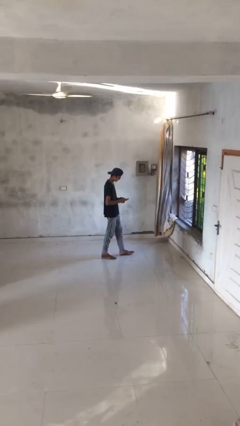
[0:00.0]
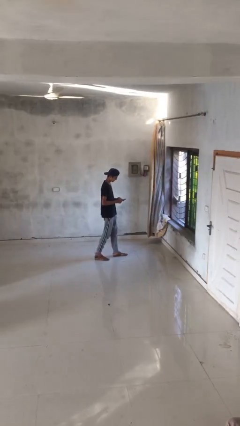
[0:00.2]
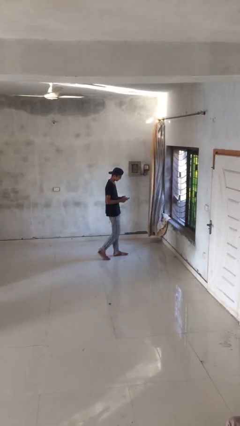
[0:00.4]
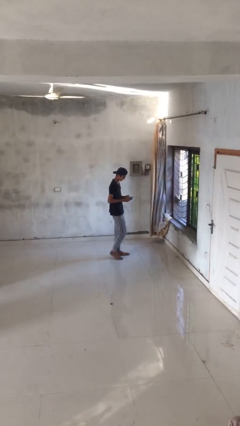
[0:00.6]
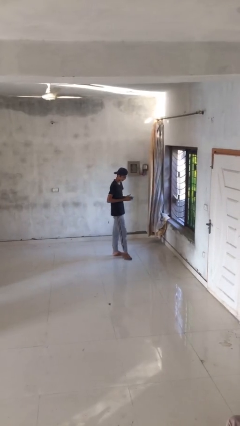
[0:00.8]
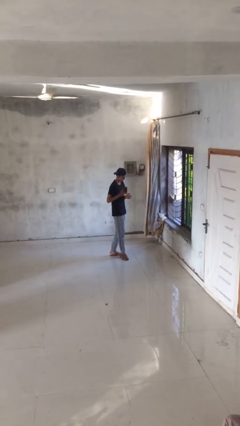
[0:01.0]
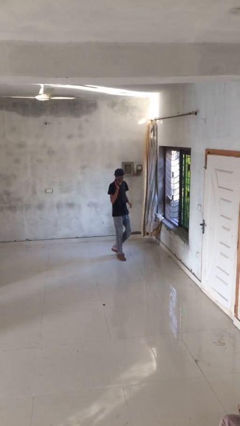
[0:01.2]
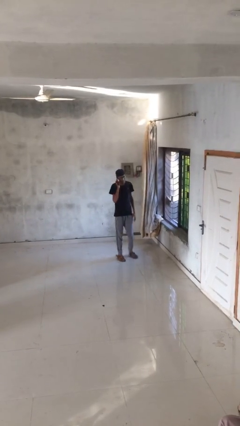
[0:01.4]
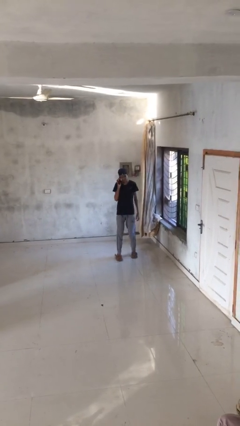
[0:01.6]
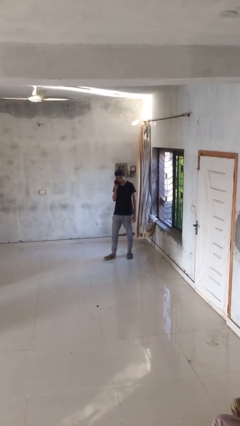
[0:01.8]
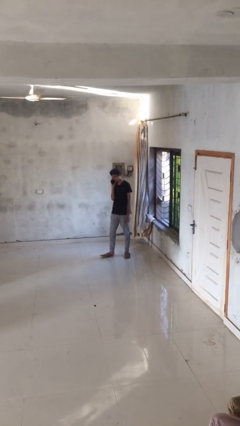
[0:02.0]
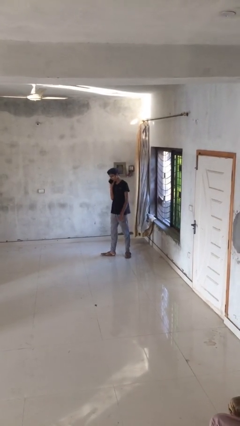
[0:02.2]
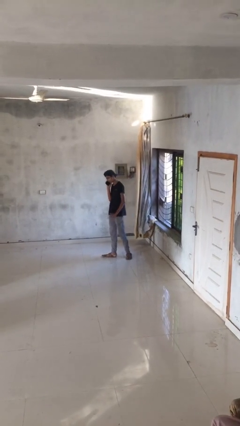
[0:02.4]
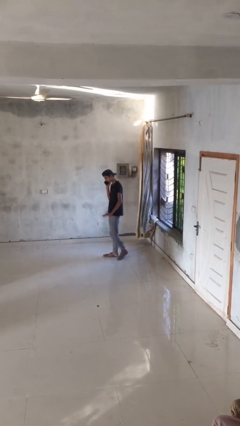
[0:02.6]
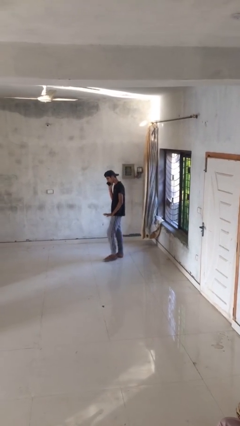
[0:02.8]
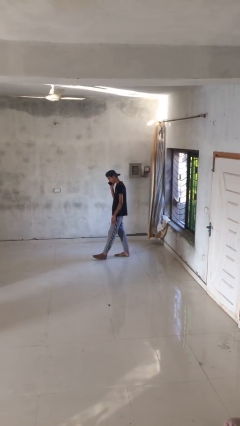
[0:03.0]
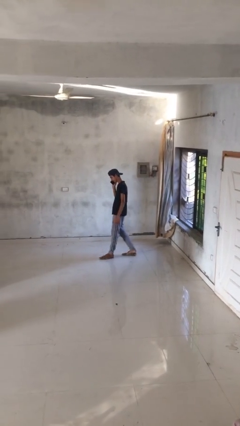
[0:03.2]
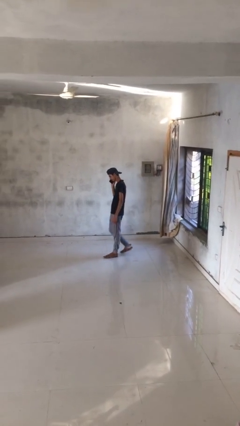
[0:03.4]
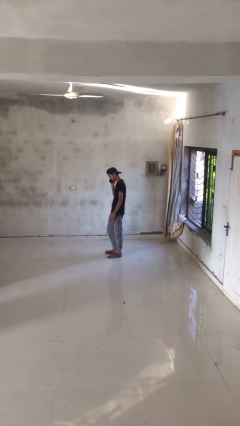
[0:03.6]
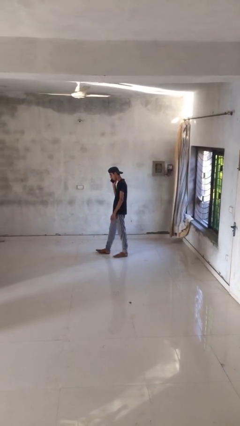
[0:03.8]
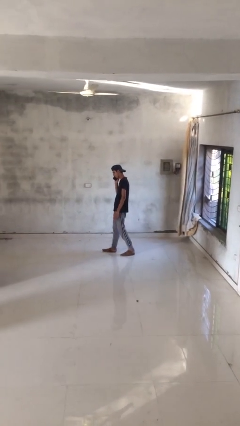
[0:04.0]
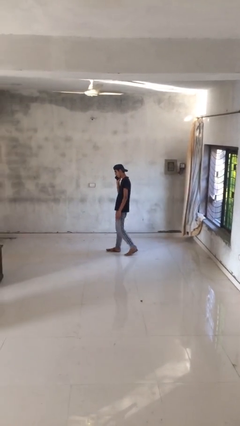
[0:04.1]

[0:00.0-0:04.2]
person talks on phone

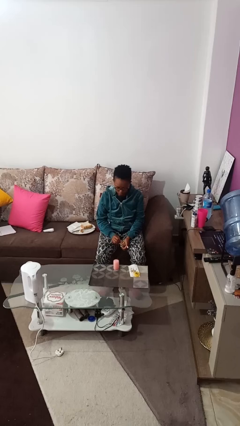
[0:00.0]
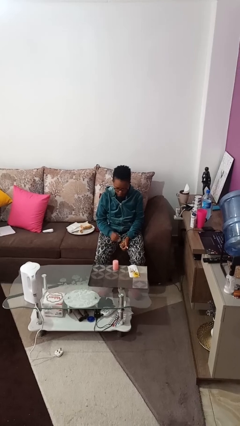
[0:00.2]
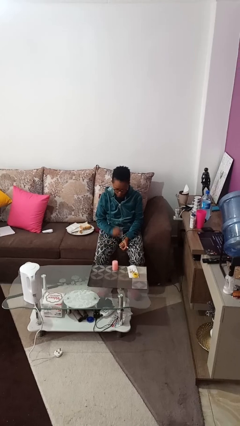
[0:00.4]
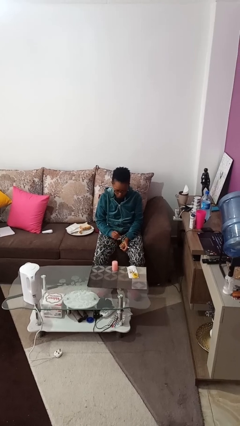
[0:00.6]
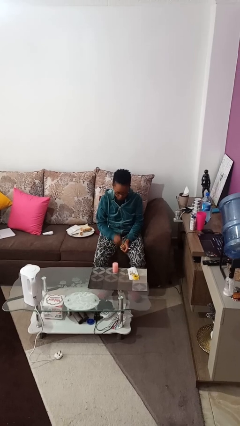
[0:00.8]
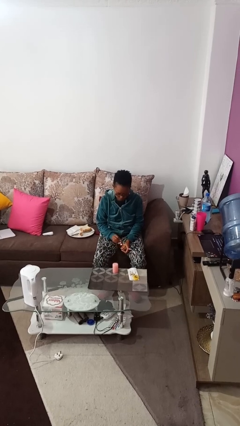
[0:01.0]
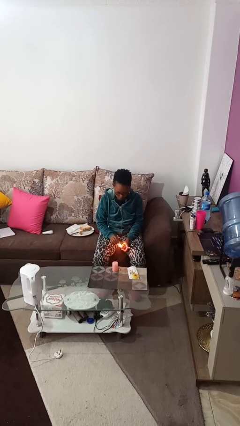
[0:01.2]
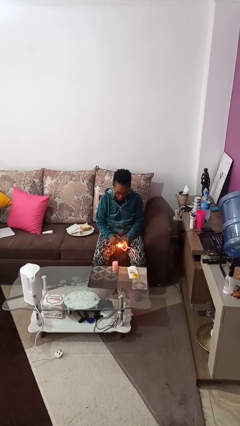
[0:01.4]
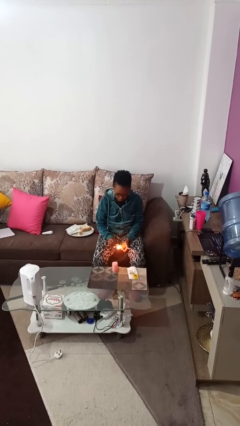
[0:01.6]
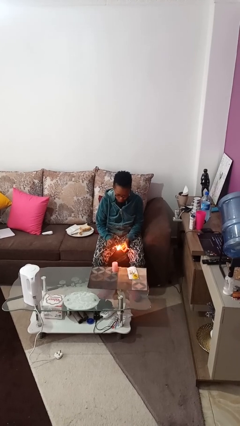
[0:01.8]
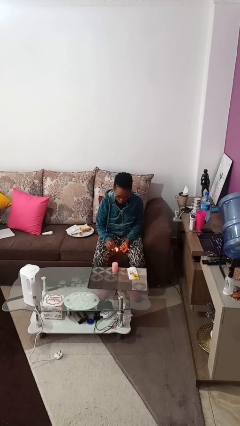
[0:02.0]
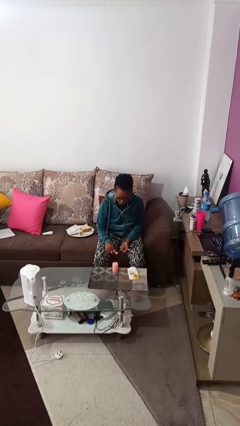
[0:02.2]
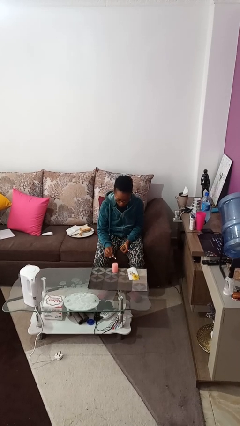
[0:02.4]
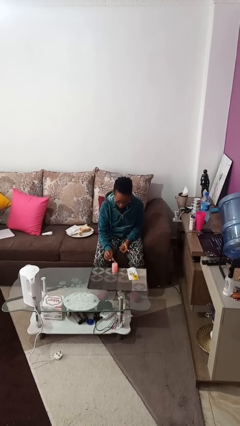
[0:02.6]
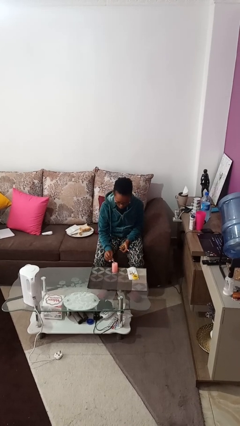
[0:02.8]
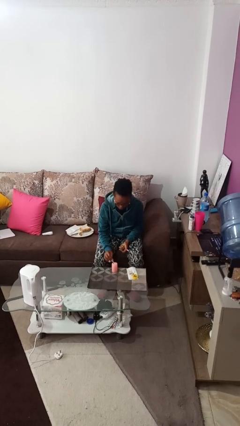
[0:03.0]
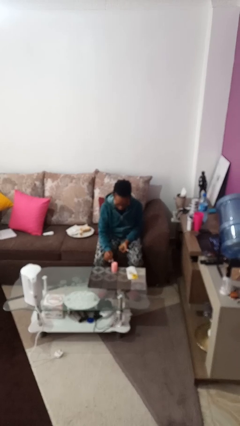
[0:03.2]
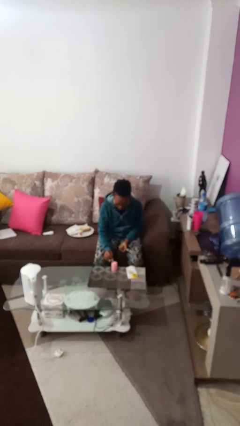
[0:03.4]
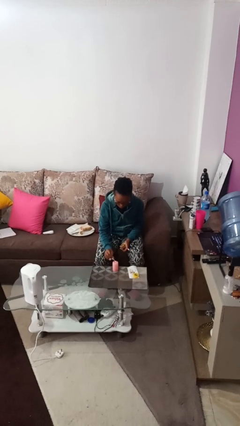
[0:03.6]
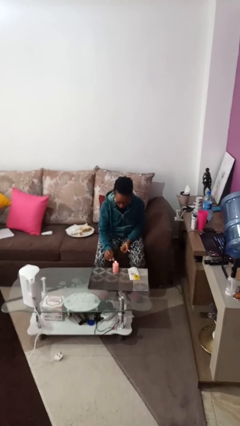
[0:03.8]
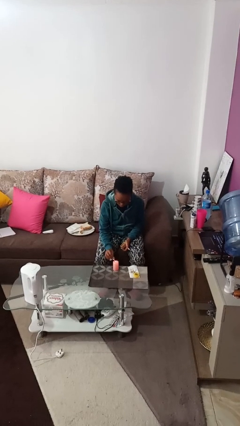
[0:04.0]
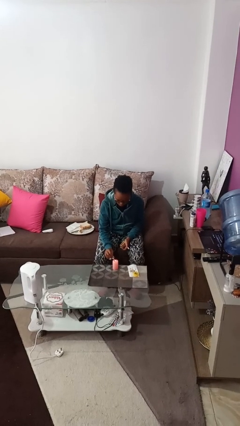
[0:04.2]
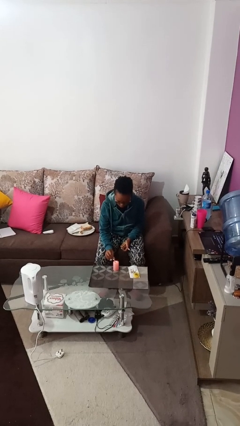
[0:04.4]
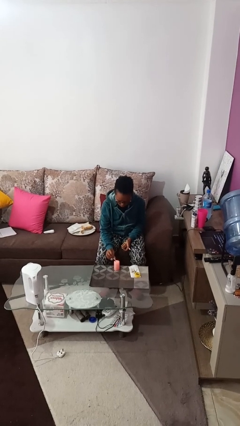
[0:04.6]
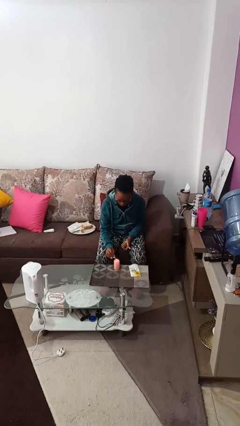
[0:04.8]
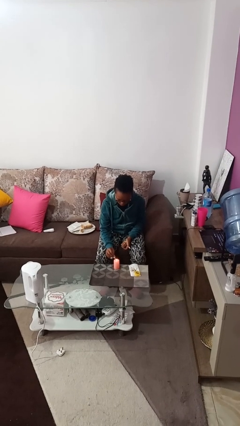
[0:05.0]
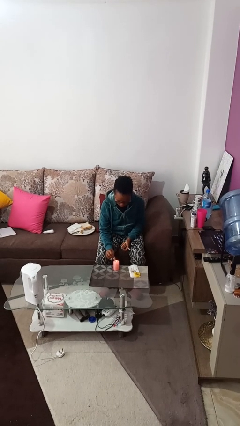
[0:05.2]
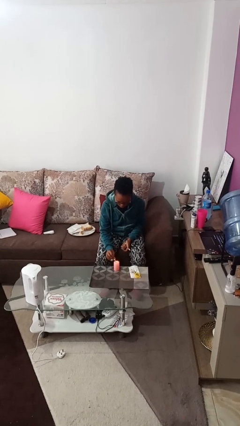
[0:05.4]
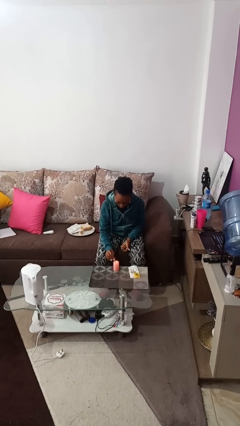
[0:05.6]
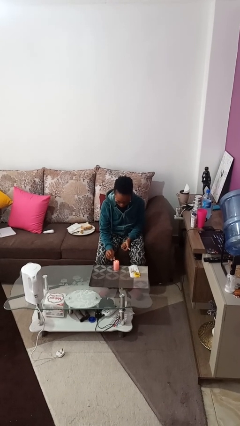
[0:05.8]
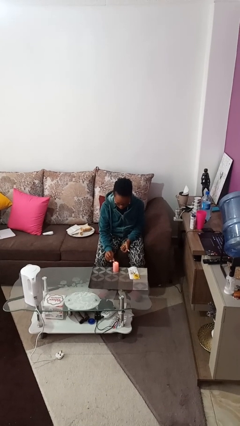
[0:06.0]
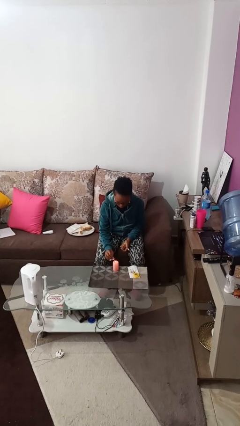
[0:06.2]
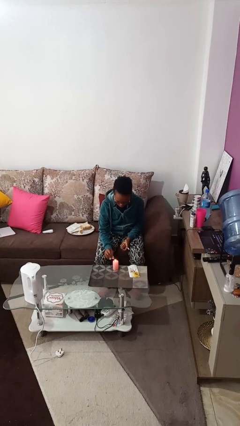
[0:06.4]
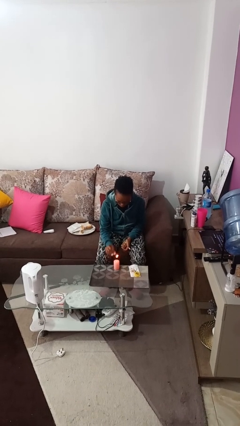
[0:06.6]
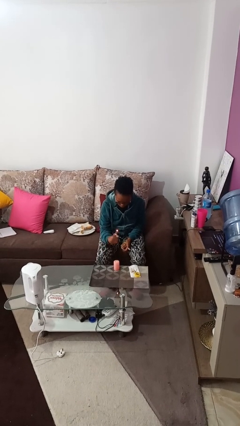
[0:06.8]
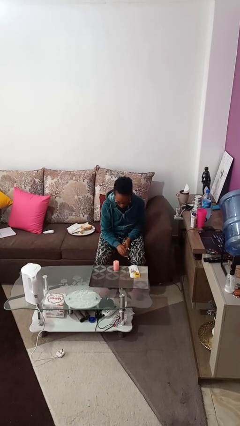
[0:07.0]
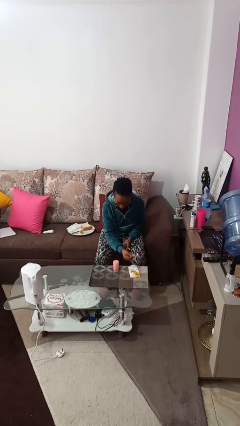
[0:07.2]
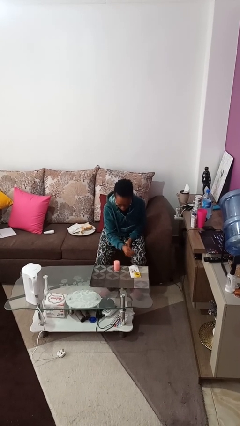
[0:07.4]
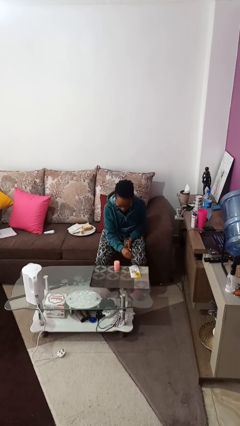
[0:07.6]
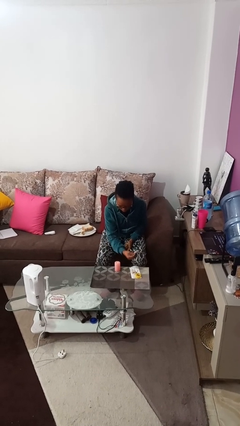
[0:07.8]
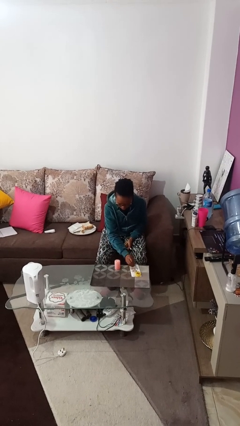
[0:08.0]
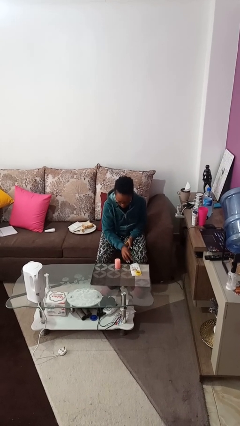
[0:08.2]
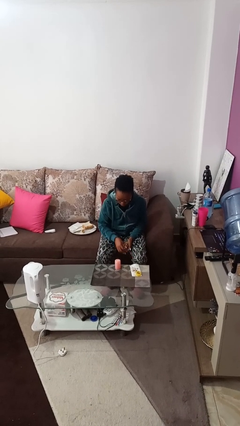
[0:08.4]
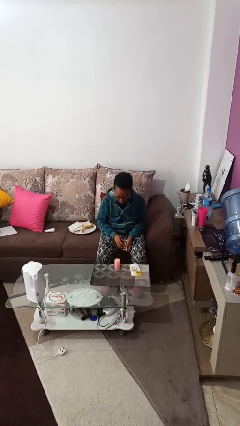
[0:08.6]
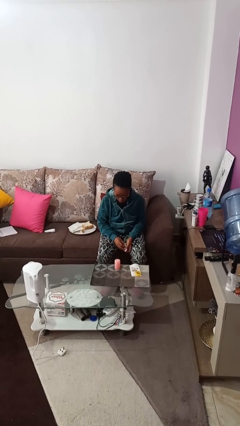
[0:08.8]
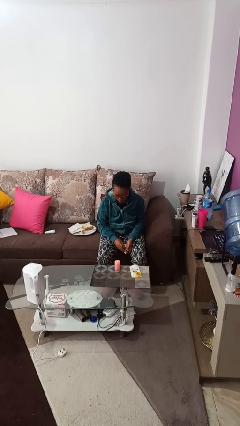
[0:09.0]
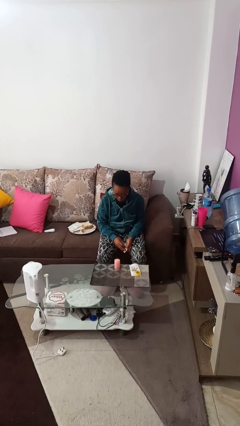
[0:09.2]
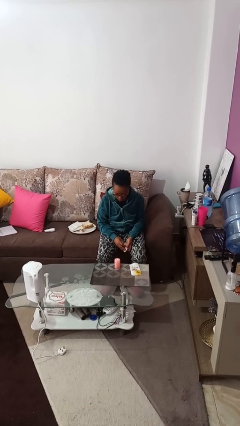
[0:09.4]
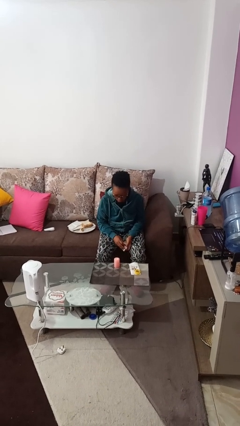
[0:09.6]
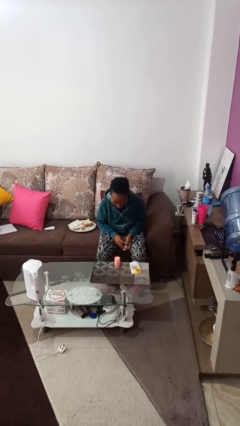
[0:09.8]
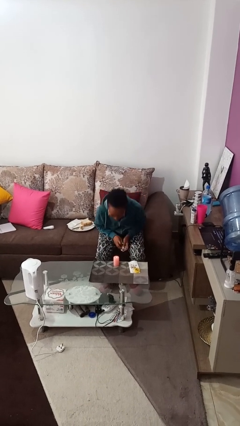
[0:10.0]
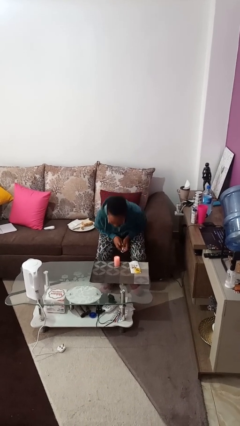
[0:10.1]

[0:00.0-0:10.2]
person lights candle

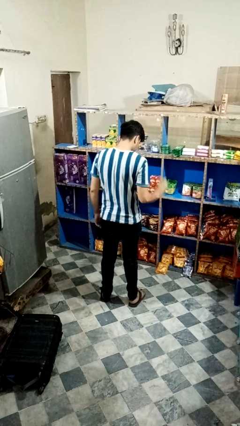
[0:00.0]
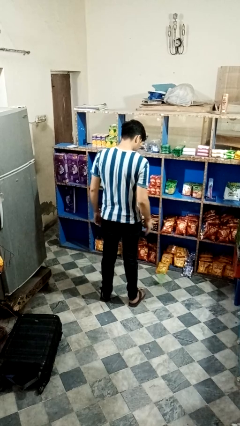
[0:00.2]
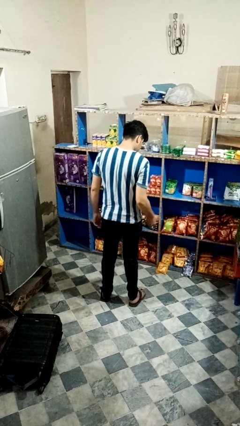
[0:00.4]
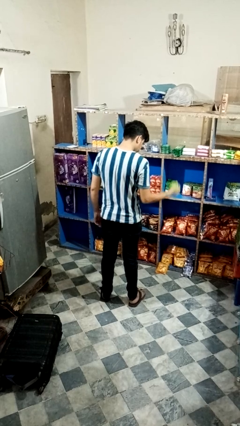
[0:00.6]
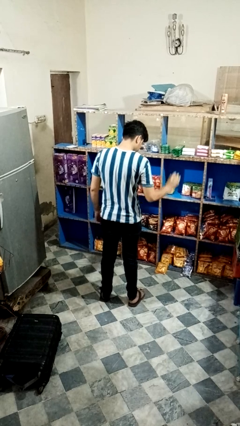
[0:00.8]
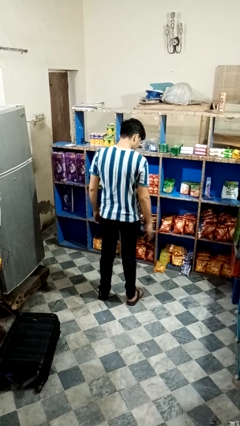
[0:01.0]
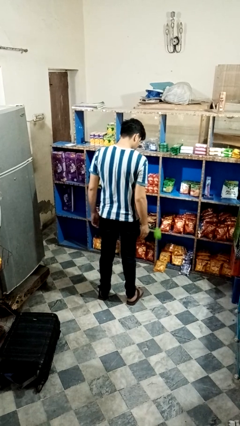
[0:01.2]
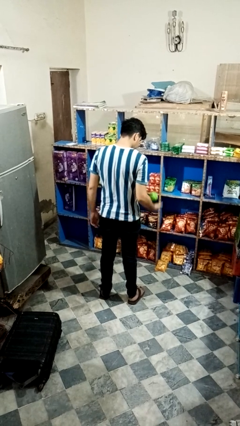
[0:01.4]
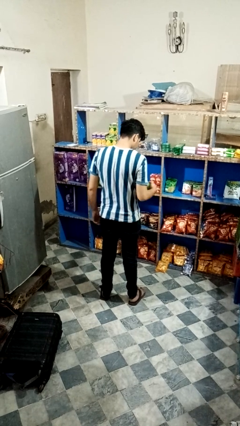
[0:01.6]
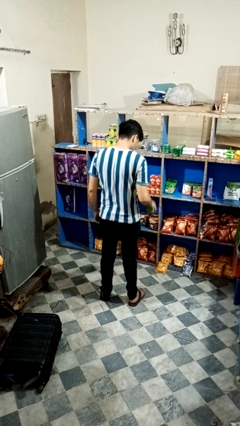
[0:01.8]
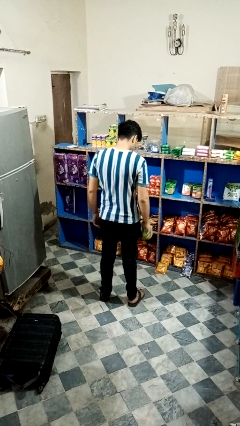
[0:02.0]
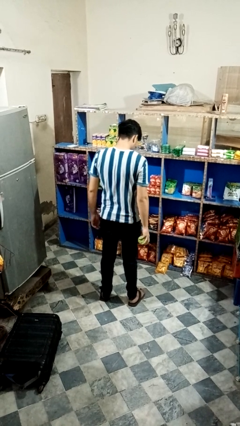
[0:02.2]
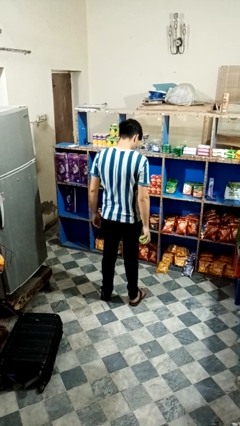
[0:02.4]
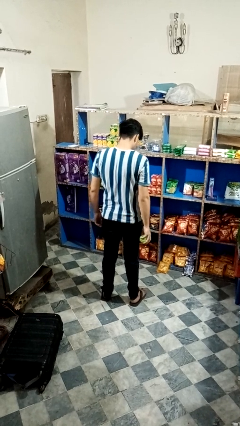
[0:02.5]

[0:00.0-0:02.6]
person bounces ball on floor

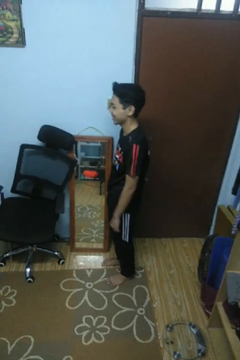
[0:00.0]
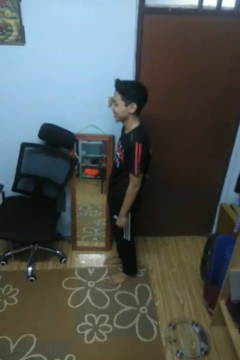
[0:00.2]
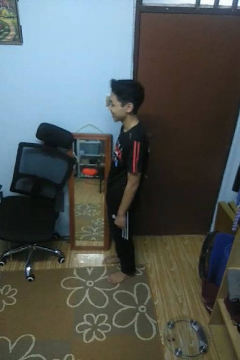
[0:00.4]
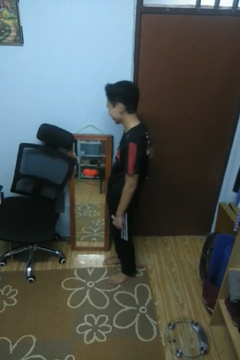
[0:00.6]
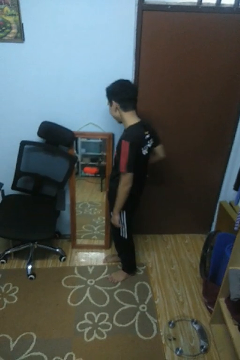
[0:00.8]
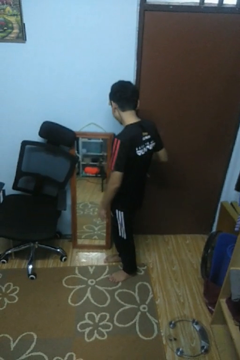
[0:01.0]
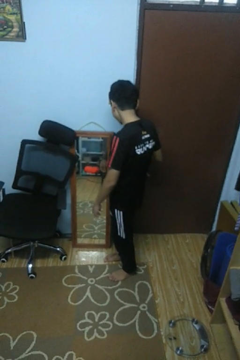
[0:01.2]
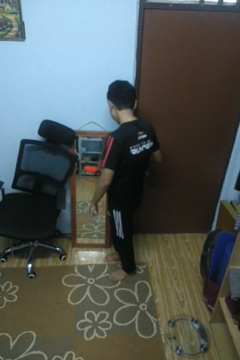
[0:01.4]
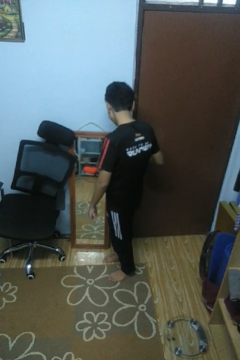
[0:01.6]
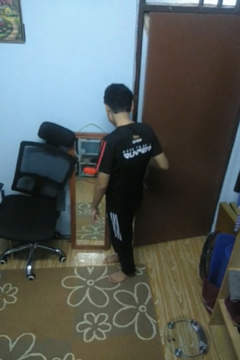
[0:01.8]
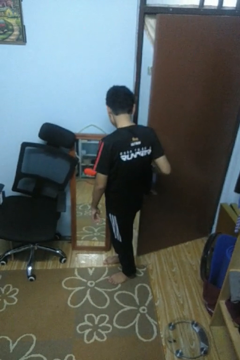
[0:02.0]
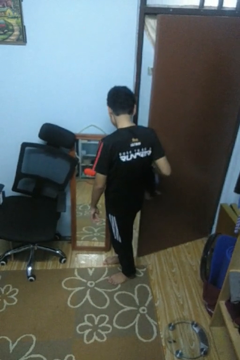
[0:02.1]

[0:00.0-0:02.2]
person opens facility door
